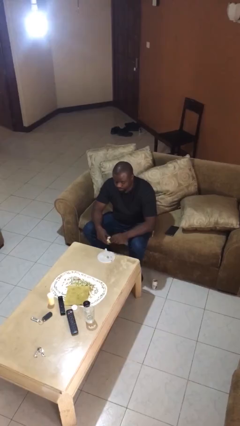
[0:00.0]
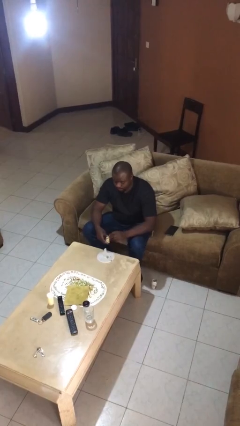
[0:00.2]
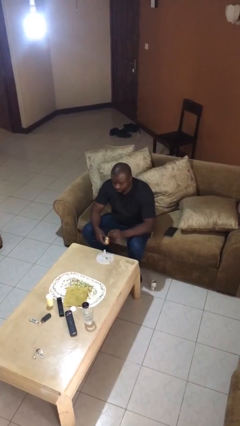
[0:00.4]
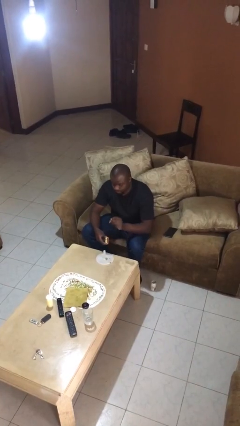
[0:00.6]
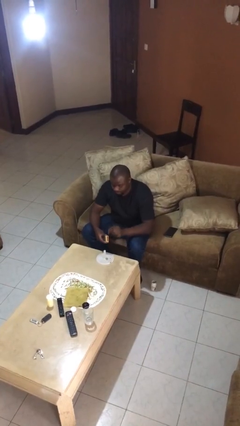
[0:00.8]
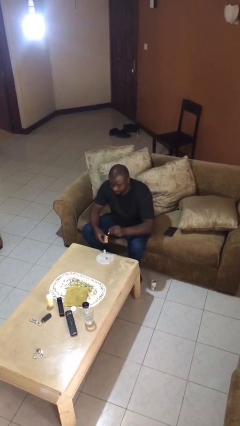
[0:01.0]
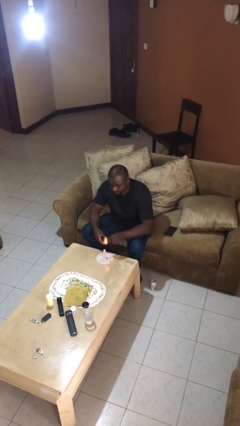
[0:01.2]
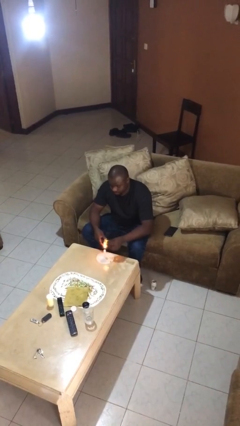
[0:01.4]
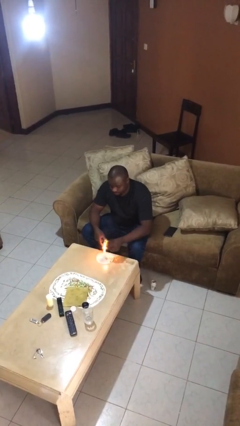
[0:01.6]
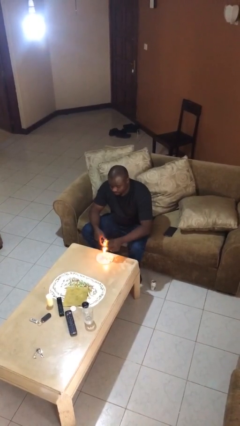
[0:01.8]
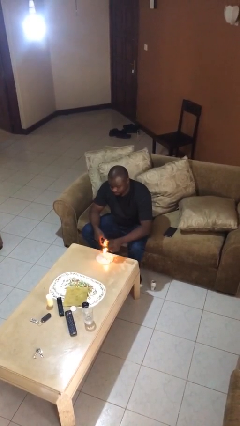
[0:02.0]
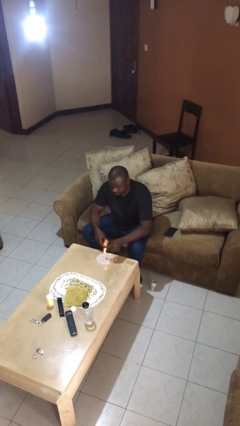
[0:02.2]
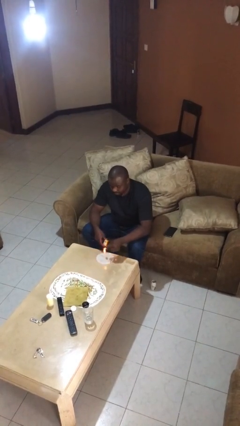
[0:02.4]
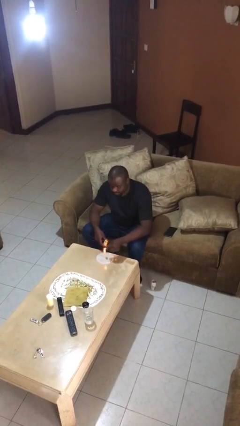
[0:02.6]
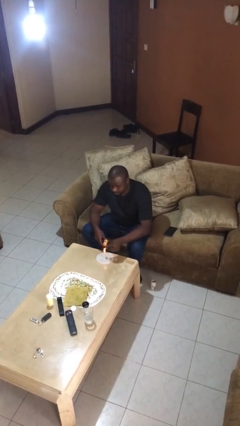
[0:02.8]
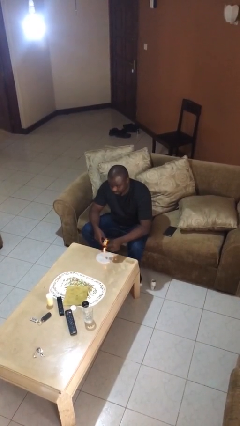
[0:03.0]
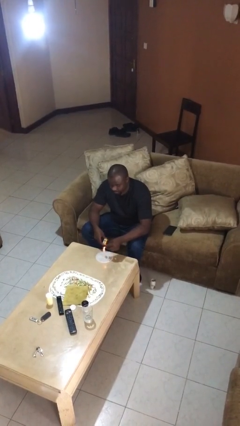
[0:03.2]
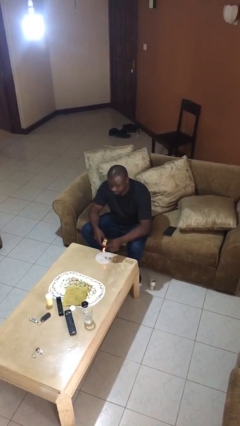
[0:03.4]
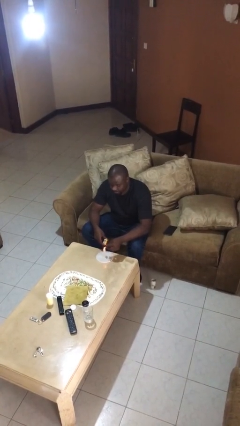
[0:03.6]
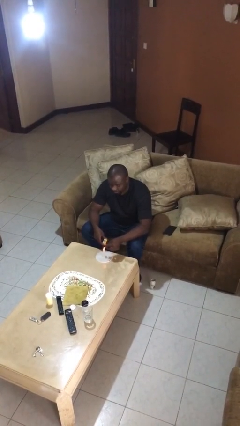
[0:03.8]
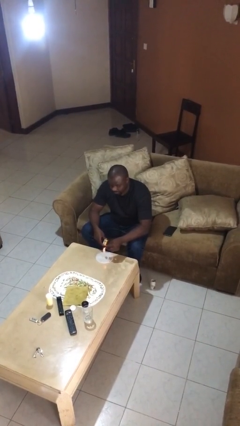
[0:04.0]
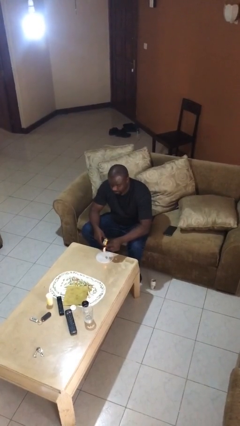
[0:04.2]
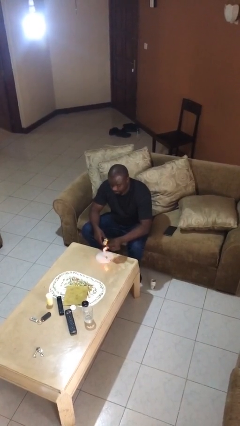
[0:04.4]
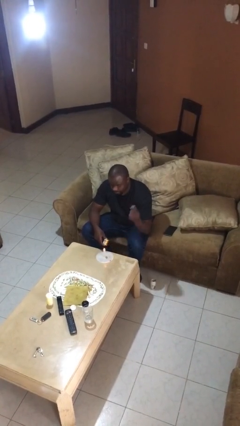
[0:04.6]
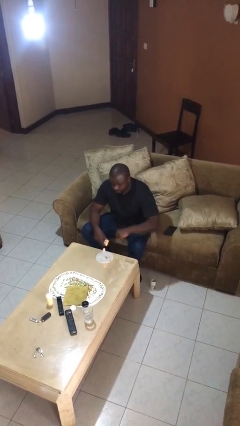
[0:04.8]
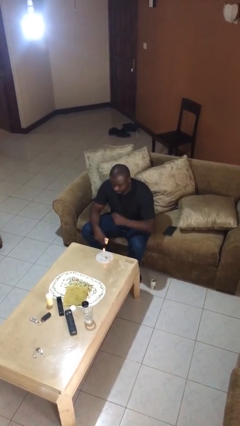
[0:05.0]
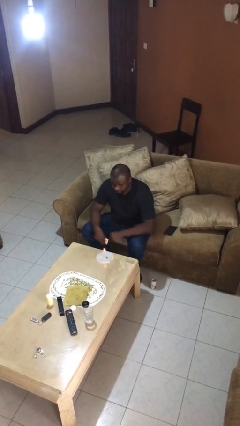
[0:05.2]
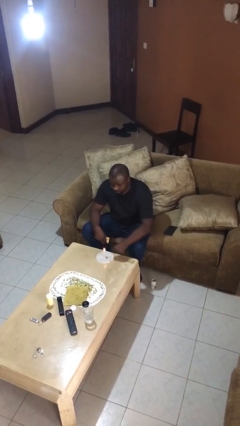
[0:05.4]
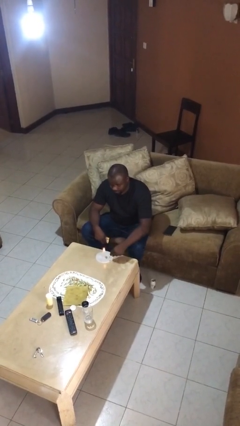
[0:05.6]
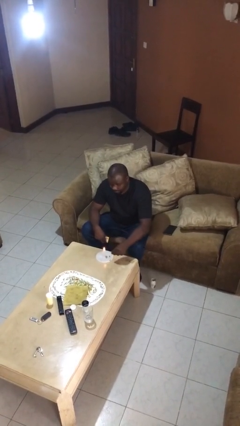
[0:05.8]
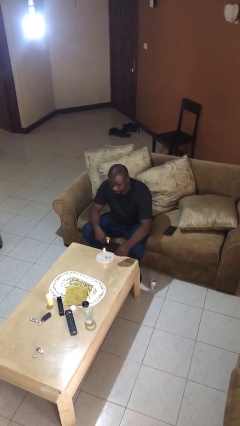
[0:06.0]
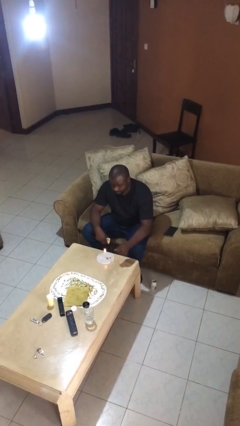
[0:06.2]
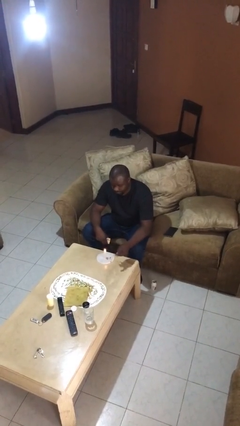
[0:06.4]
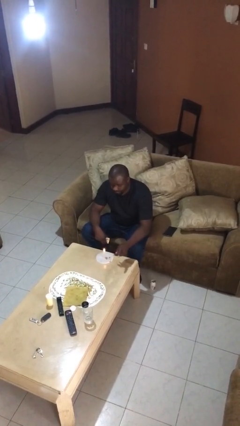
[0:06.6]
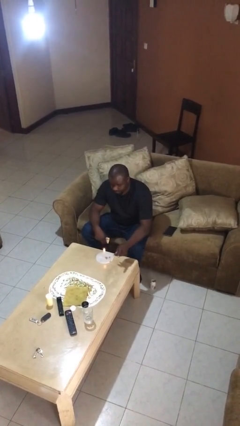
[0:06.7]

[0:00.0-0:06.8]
person lights candle

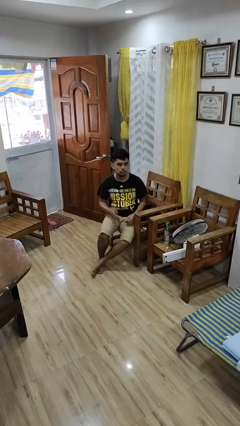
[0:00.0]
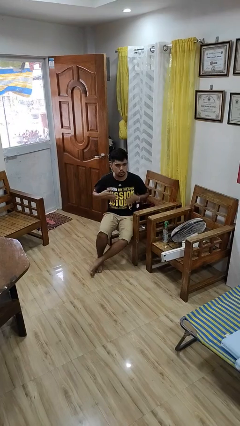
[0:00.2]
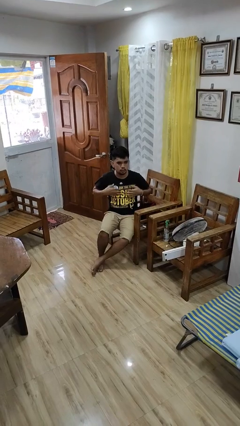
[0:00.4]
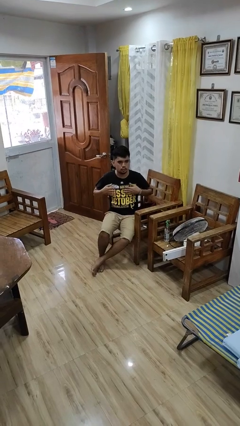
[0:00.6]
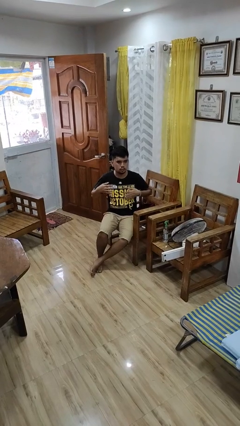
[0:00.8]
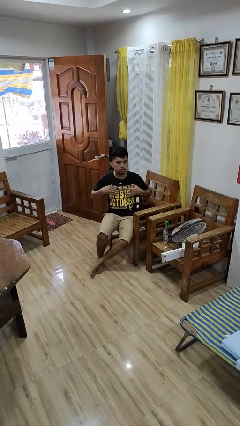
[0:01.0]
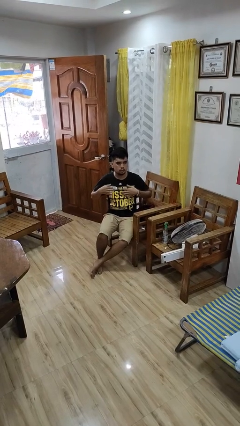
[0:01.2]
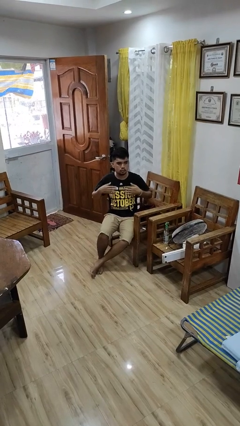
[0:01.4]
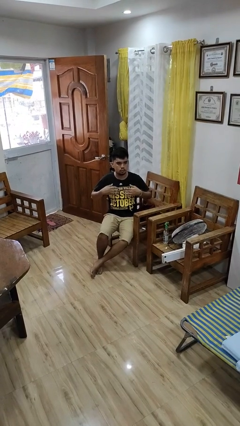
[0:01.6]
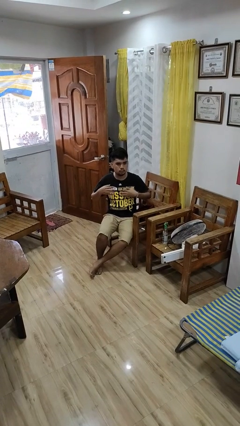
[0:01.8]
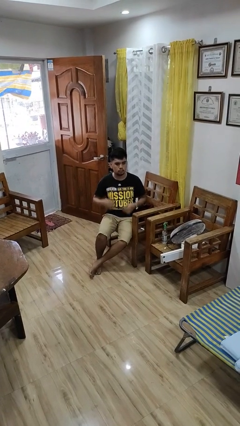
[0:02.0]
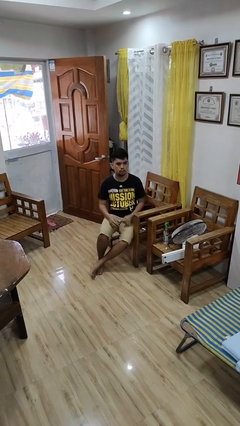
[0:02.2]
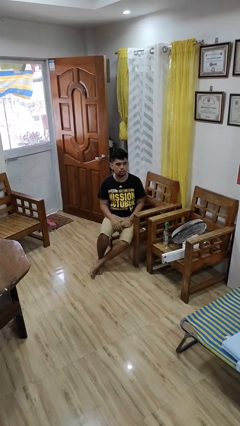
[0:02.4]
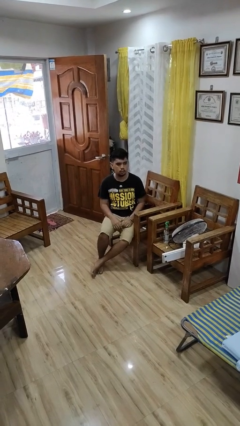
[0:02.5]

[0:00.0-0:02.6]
person drums on chest

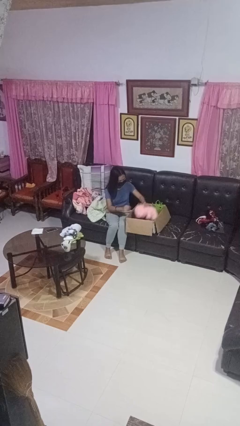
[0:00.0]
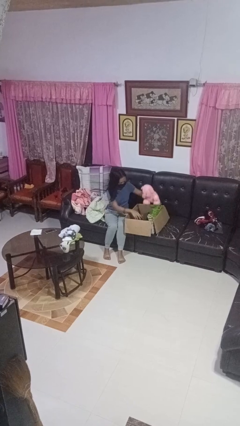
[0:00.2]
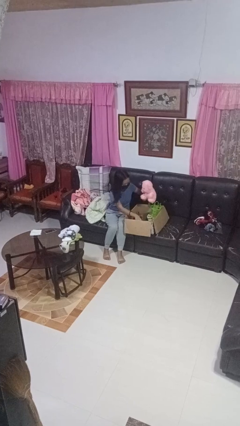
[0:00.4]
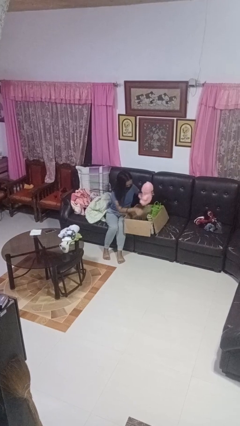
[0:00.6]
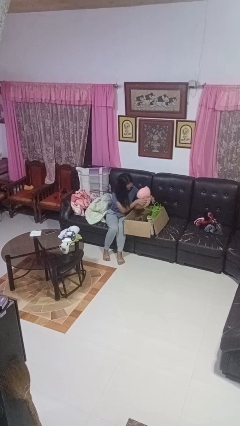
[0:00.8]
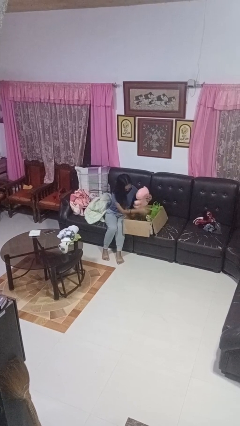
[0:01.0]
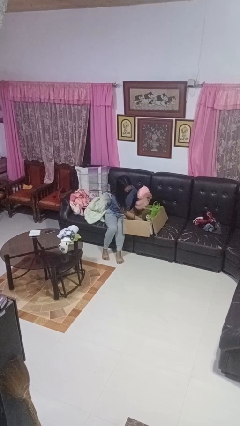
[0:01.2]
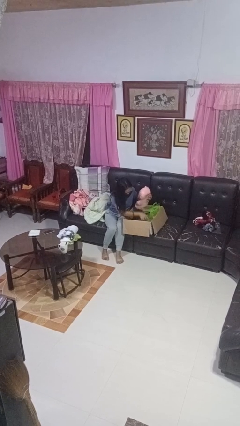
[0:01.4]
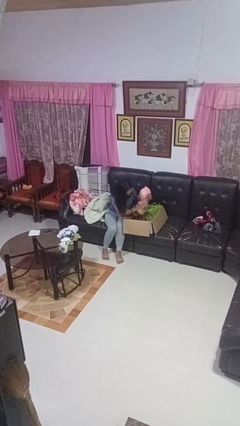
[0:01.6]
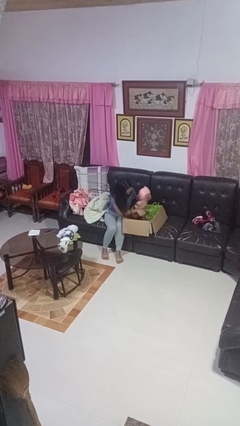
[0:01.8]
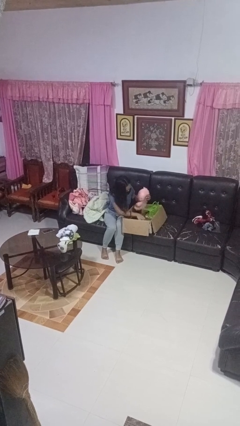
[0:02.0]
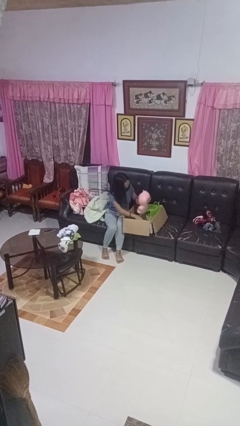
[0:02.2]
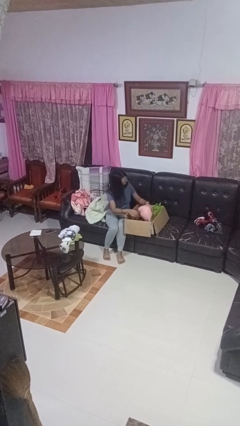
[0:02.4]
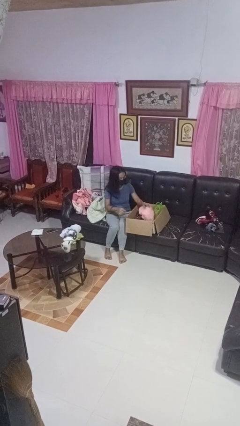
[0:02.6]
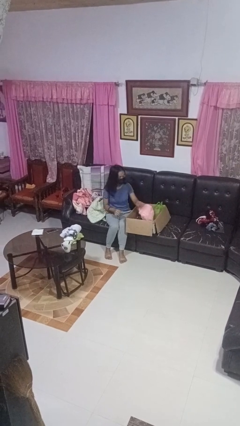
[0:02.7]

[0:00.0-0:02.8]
person searches in box

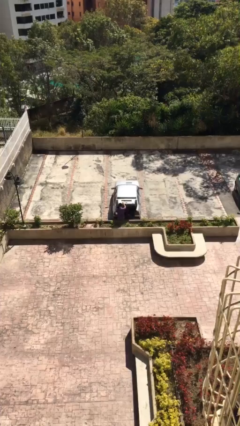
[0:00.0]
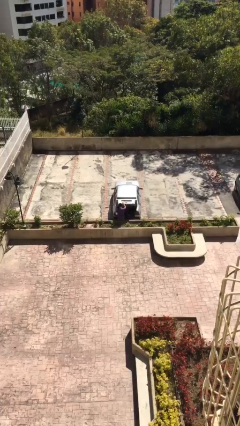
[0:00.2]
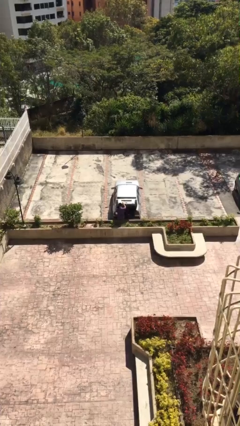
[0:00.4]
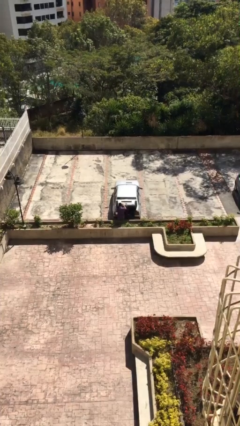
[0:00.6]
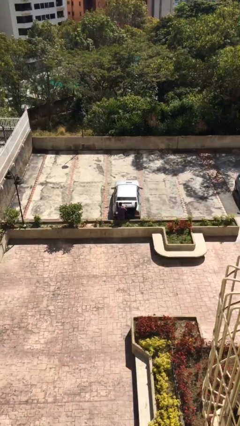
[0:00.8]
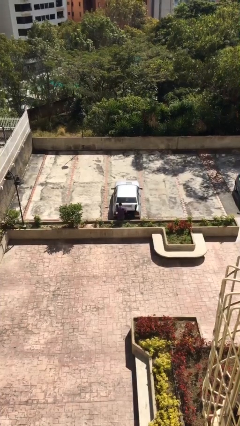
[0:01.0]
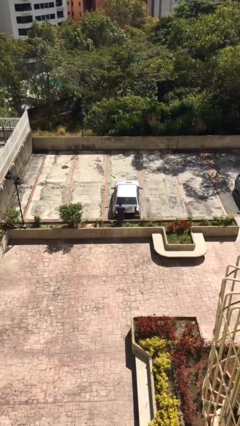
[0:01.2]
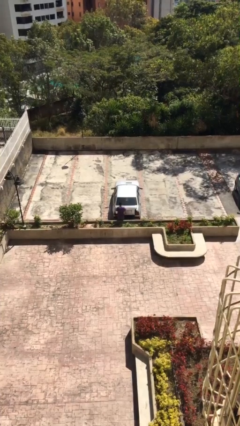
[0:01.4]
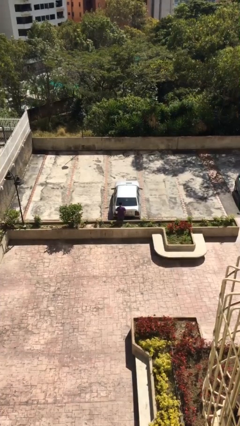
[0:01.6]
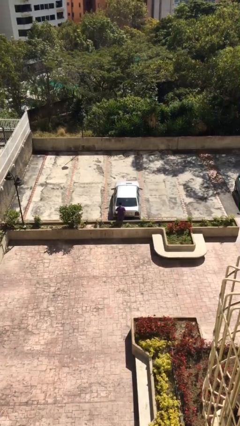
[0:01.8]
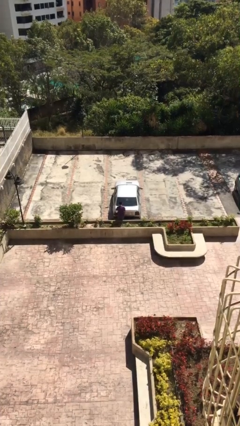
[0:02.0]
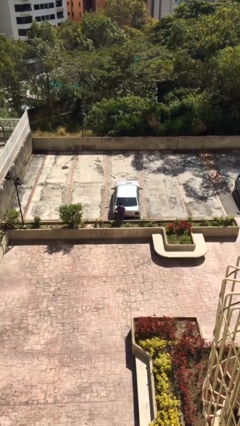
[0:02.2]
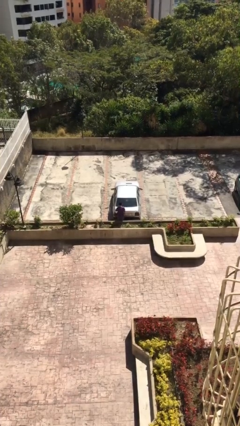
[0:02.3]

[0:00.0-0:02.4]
person closes car trunk

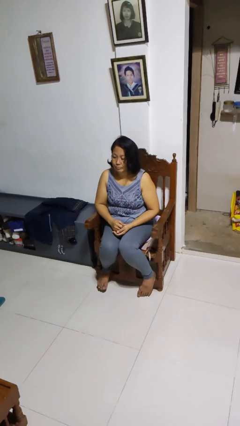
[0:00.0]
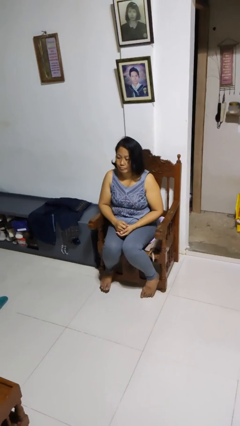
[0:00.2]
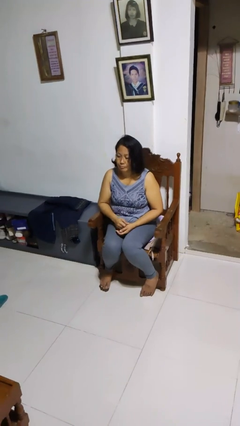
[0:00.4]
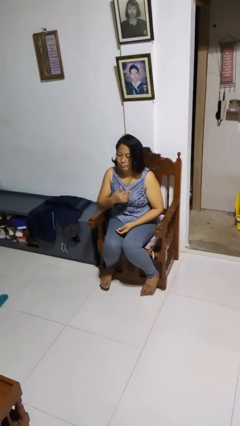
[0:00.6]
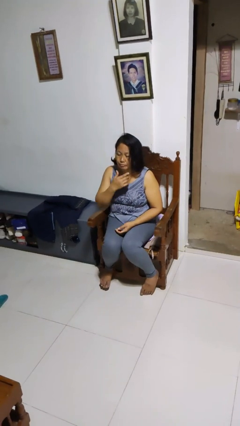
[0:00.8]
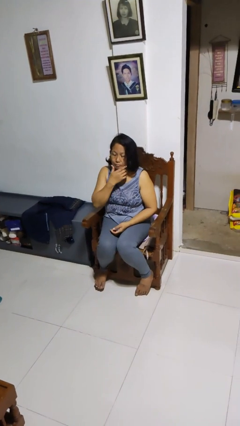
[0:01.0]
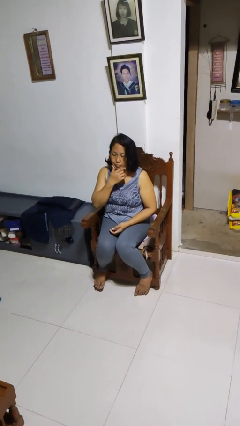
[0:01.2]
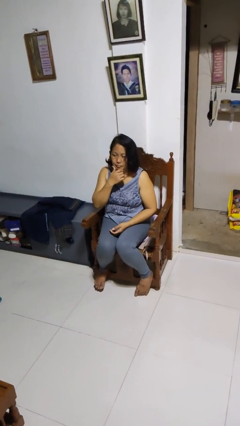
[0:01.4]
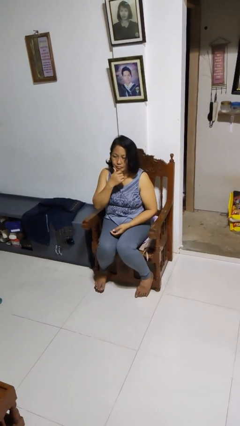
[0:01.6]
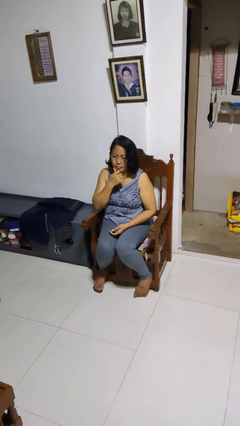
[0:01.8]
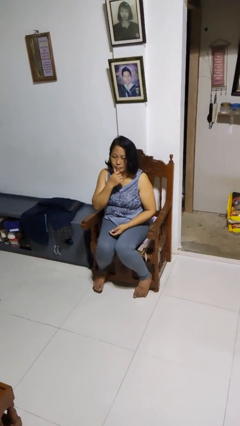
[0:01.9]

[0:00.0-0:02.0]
person strokes chin

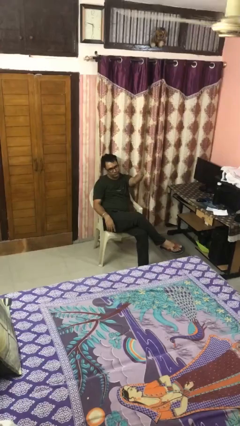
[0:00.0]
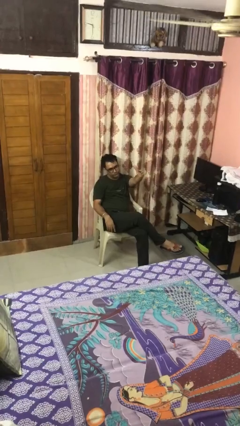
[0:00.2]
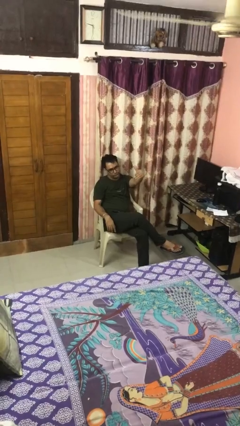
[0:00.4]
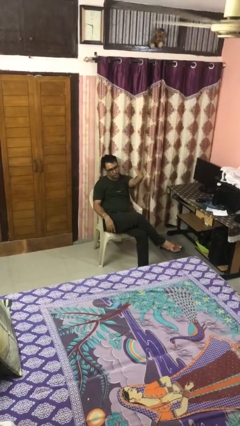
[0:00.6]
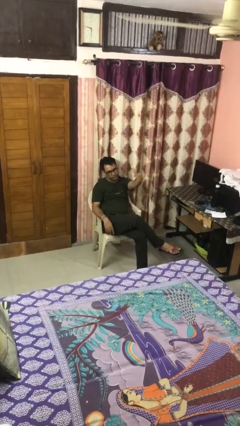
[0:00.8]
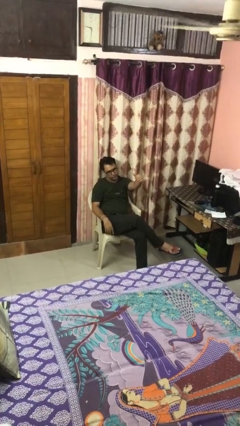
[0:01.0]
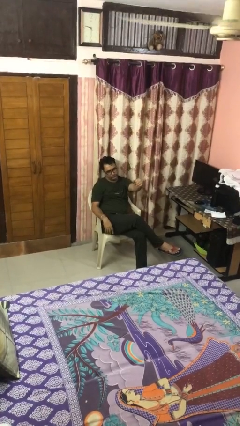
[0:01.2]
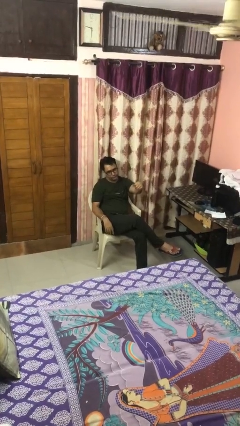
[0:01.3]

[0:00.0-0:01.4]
person gestures come here
